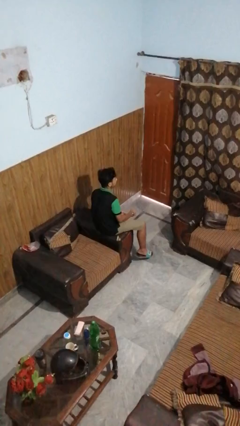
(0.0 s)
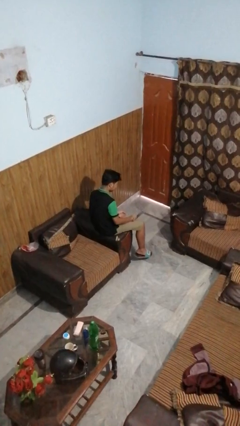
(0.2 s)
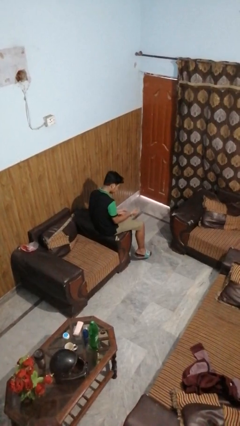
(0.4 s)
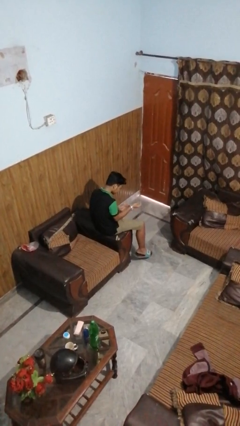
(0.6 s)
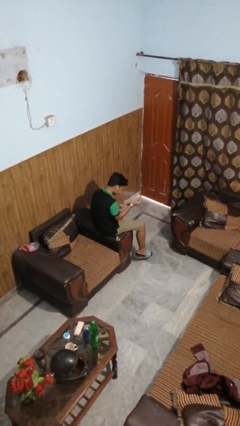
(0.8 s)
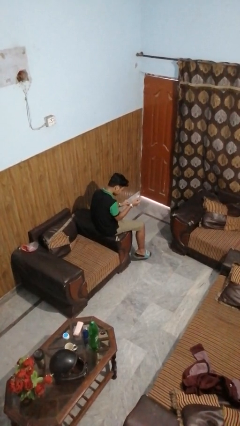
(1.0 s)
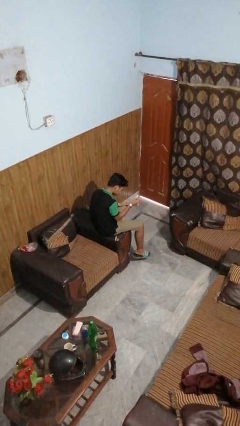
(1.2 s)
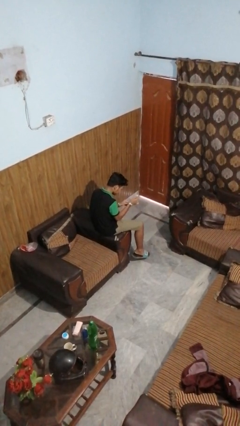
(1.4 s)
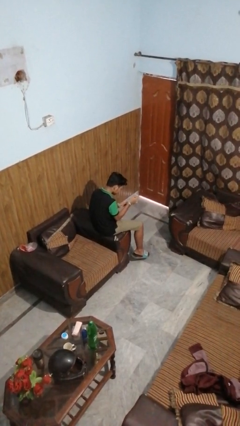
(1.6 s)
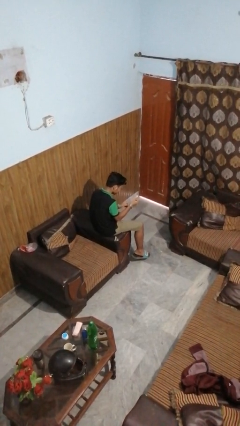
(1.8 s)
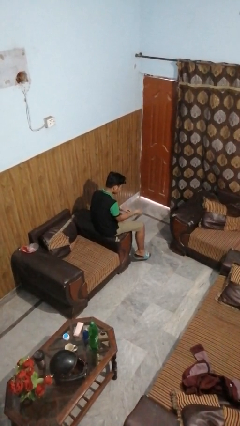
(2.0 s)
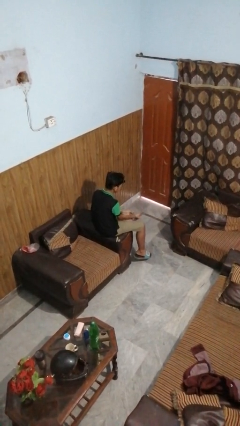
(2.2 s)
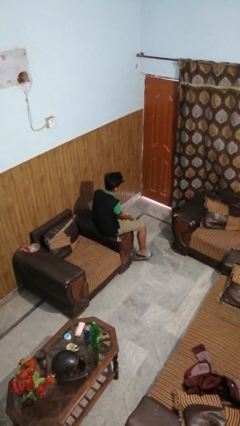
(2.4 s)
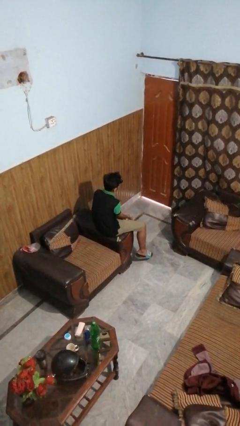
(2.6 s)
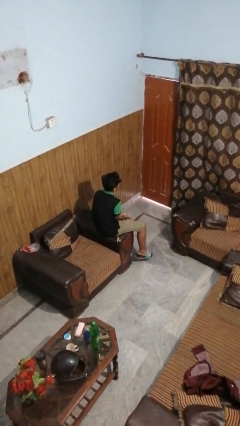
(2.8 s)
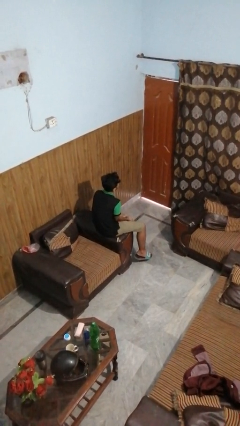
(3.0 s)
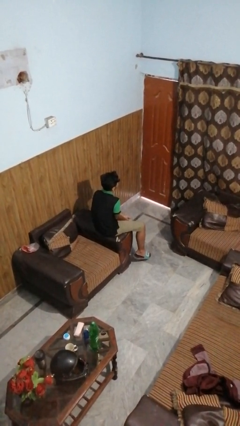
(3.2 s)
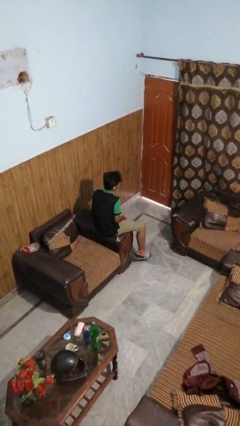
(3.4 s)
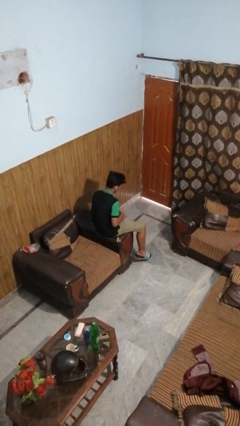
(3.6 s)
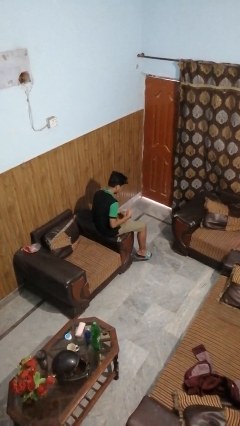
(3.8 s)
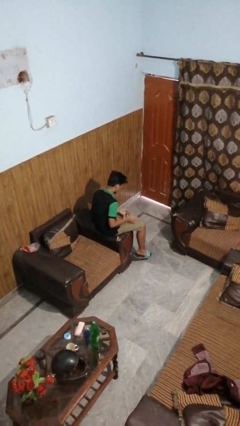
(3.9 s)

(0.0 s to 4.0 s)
person takes off wristwatch

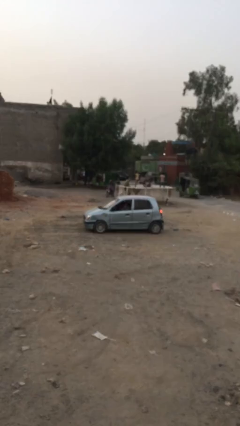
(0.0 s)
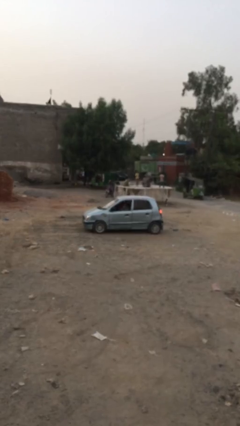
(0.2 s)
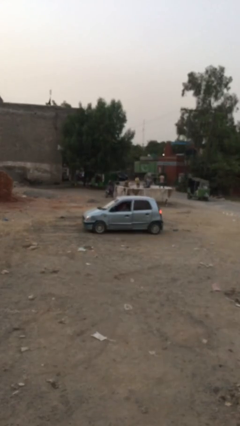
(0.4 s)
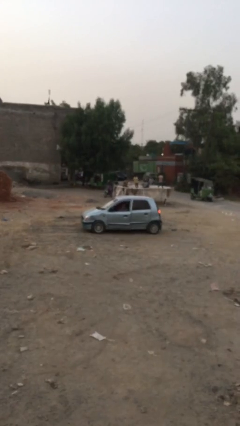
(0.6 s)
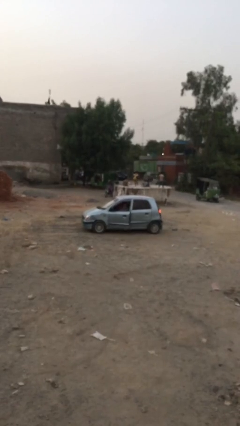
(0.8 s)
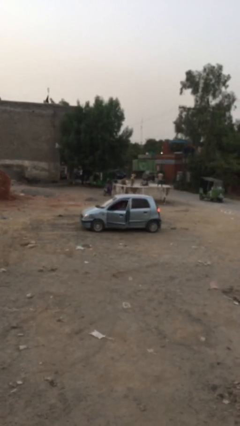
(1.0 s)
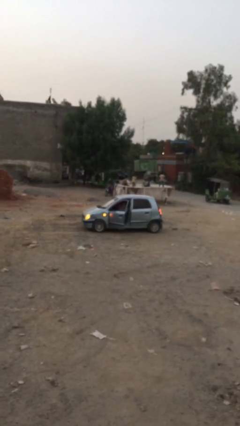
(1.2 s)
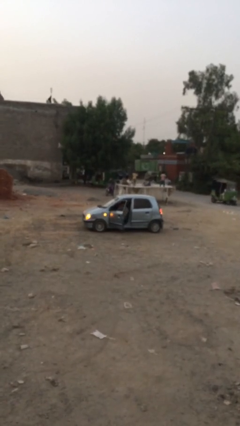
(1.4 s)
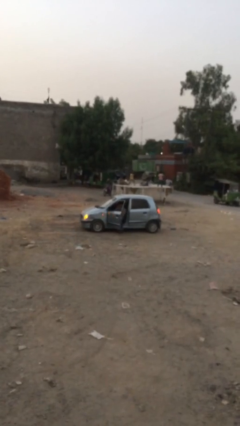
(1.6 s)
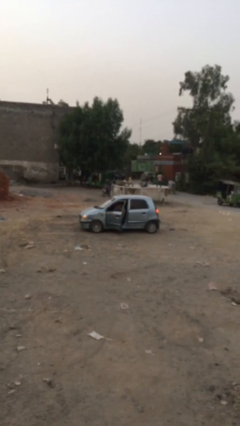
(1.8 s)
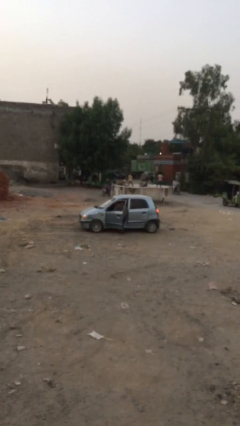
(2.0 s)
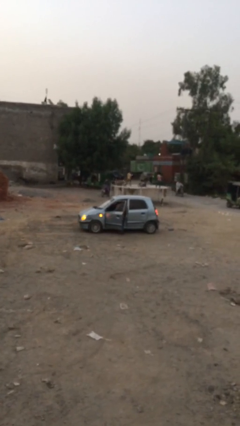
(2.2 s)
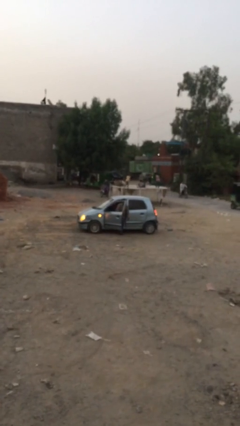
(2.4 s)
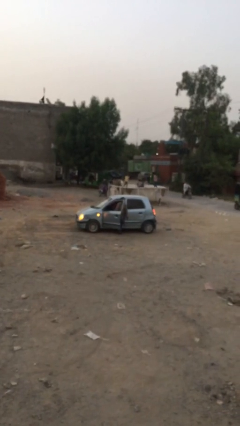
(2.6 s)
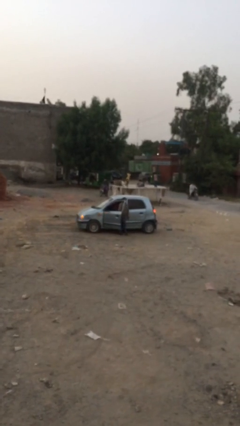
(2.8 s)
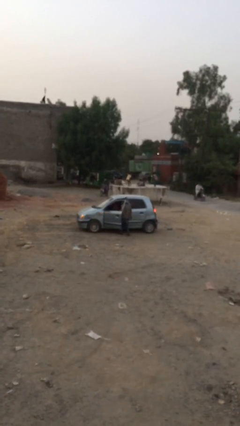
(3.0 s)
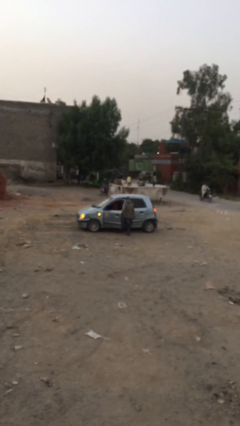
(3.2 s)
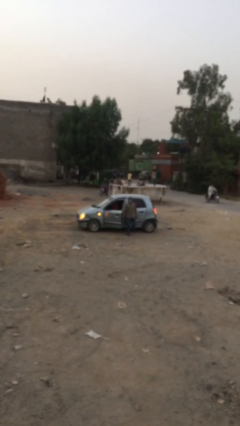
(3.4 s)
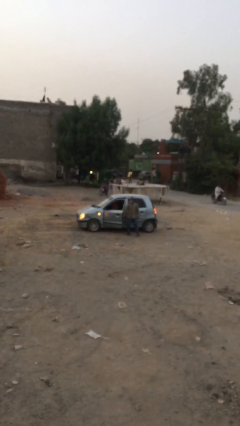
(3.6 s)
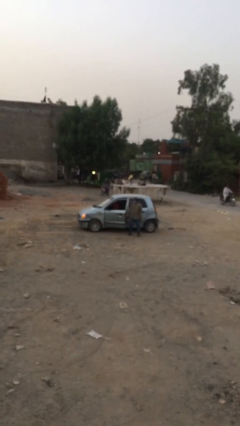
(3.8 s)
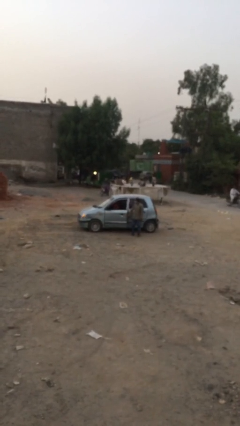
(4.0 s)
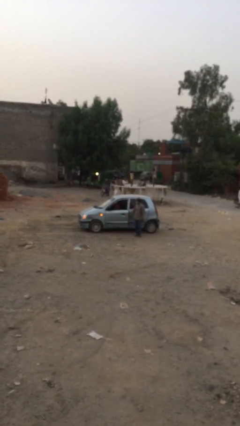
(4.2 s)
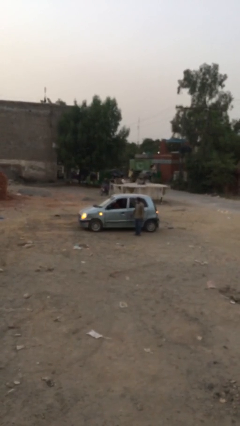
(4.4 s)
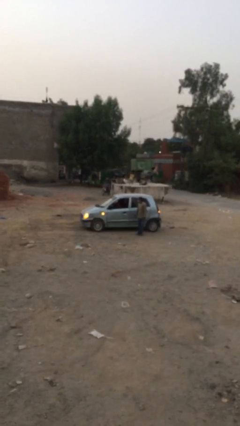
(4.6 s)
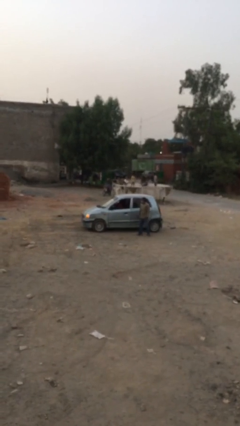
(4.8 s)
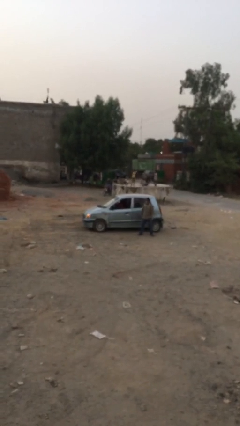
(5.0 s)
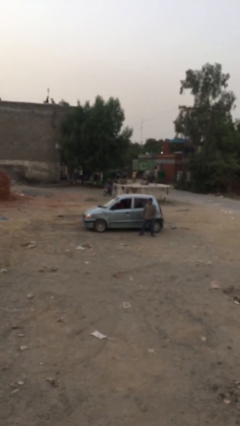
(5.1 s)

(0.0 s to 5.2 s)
car drops off person

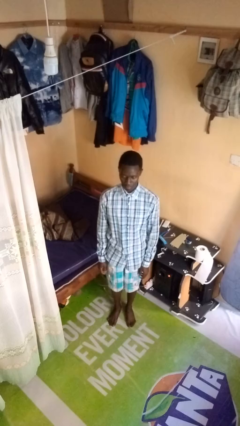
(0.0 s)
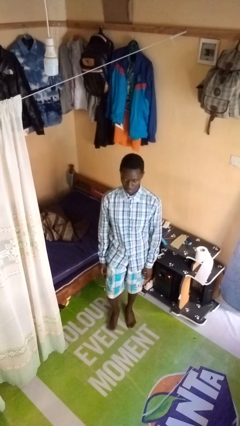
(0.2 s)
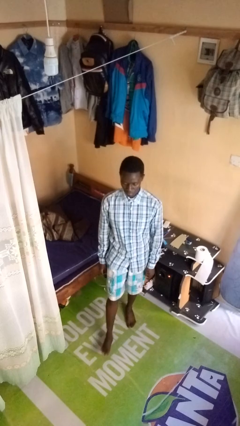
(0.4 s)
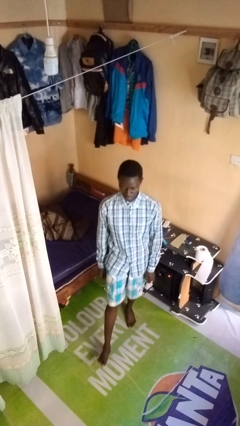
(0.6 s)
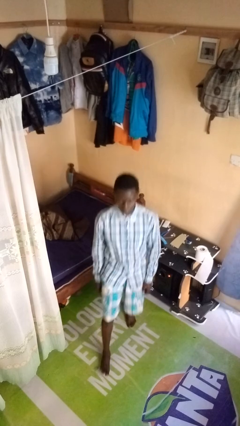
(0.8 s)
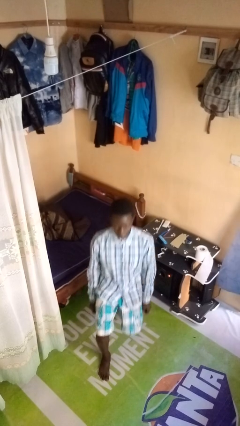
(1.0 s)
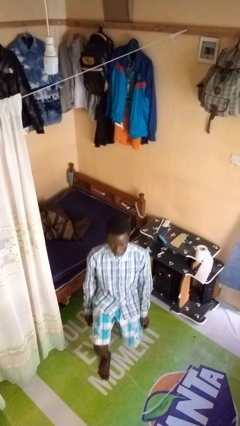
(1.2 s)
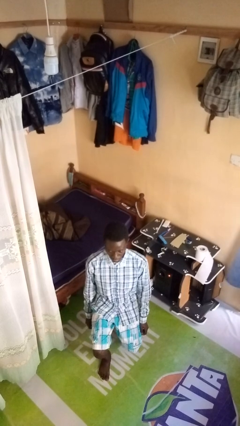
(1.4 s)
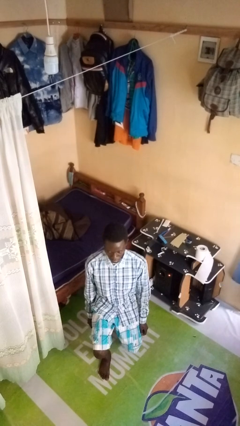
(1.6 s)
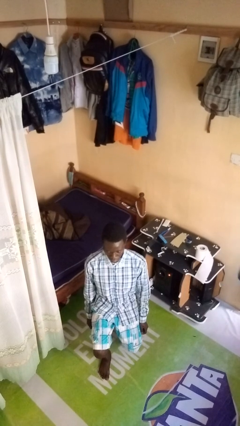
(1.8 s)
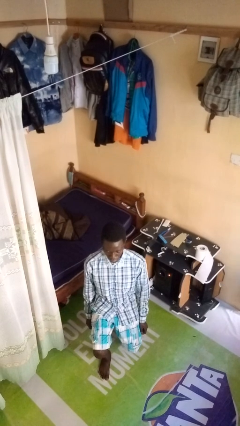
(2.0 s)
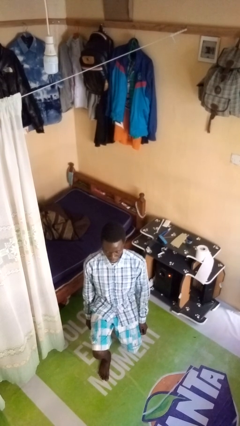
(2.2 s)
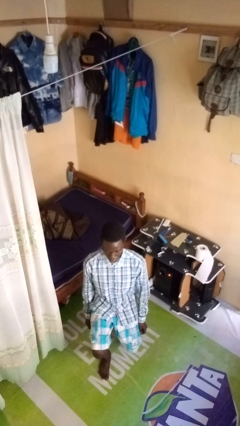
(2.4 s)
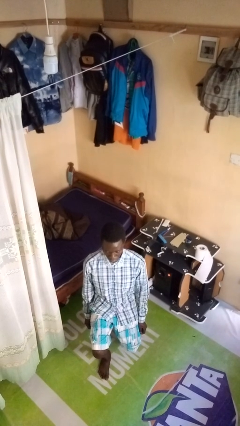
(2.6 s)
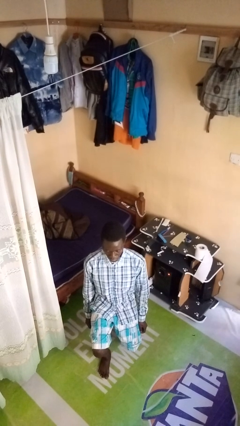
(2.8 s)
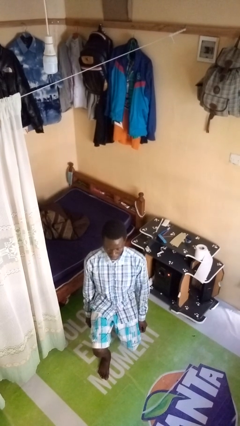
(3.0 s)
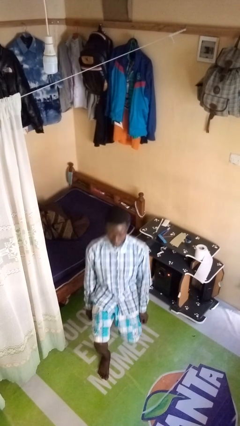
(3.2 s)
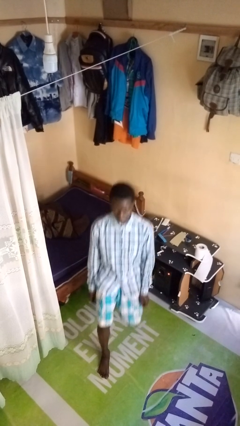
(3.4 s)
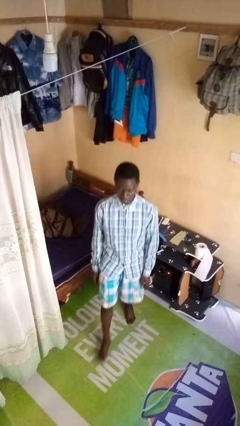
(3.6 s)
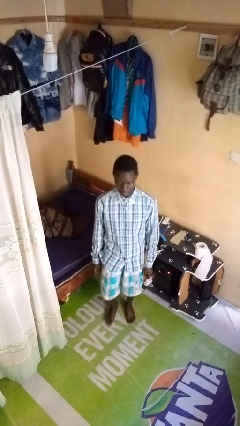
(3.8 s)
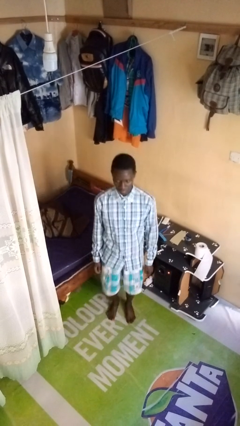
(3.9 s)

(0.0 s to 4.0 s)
person exercises with lunges

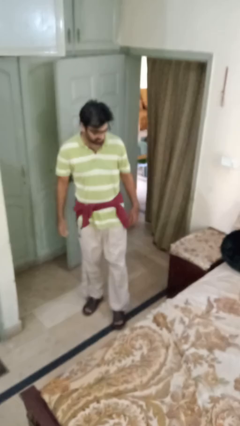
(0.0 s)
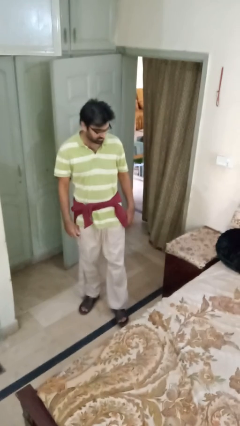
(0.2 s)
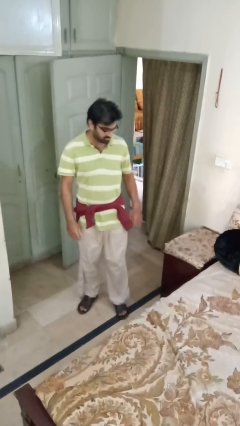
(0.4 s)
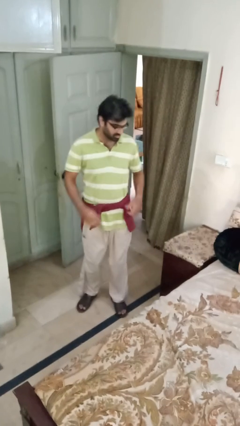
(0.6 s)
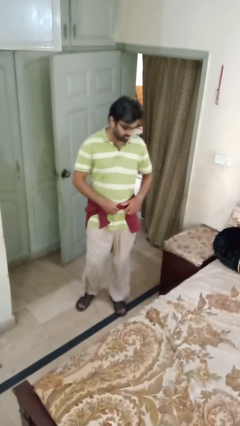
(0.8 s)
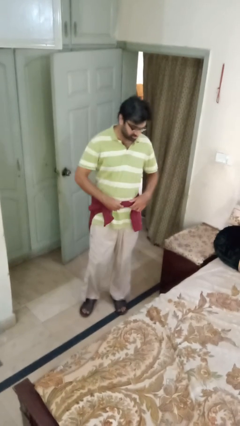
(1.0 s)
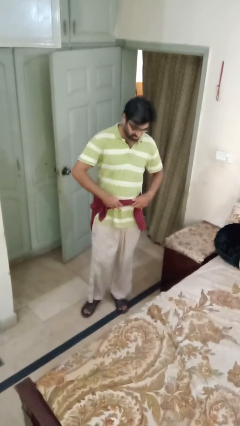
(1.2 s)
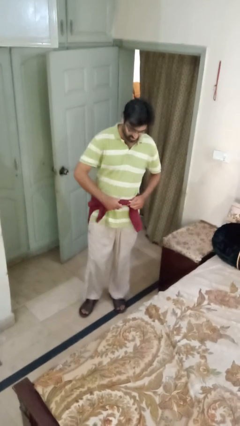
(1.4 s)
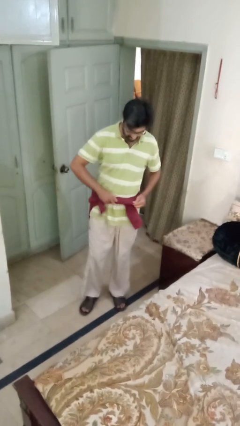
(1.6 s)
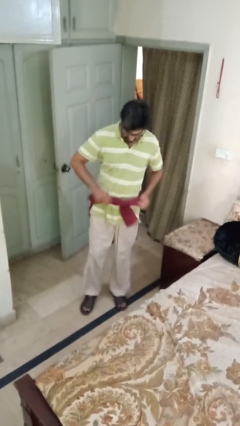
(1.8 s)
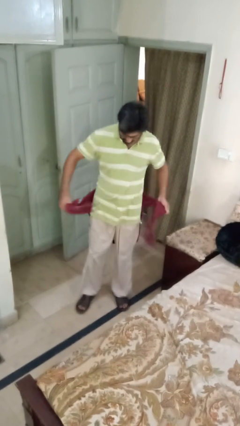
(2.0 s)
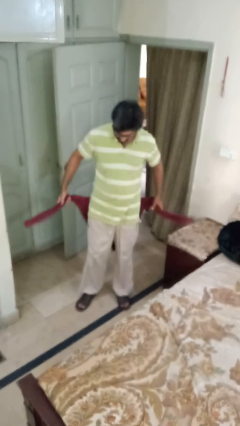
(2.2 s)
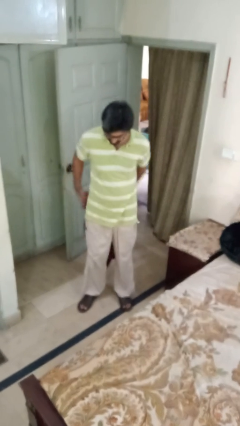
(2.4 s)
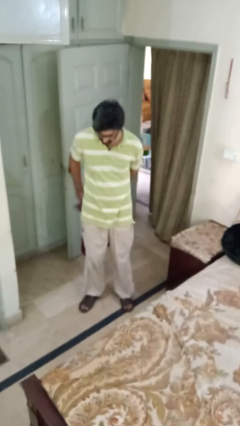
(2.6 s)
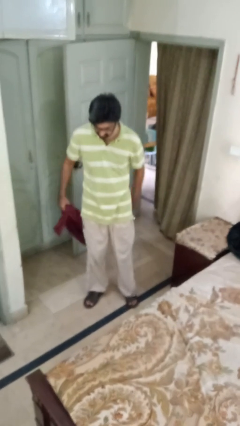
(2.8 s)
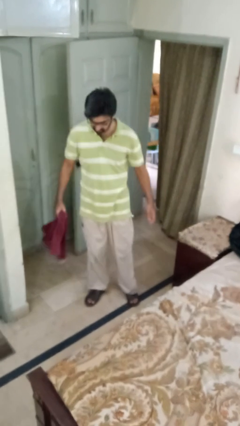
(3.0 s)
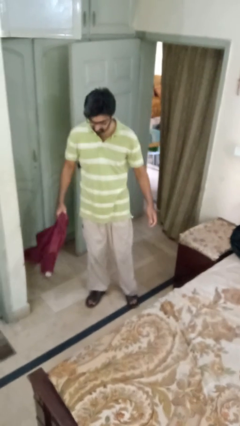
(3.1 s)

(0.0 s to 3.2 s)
person unties jacket around waist

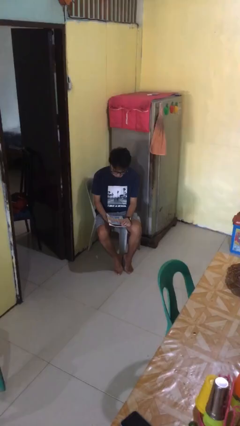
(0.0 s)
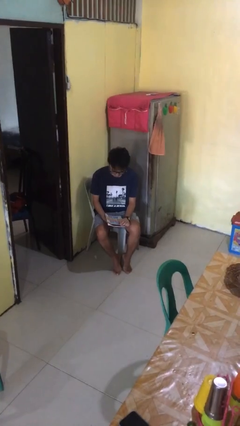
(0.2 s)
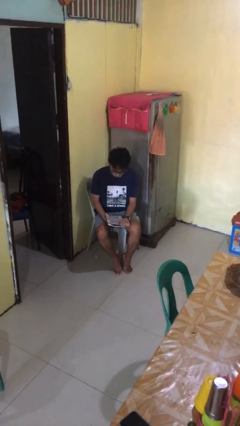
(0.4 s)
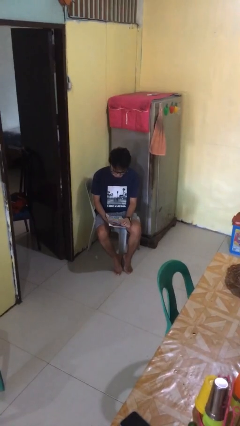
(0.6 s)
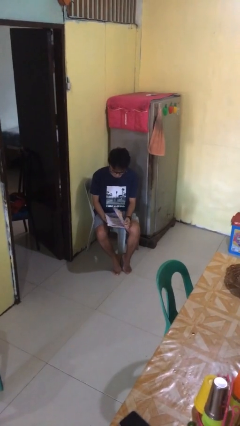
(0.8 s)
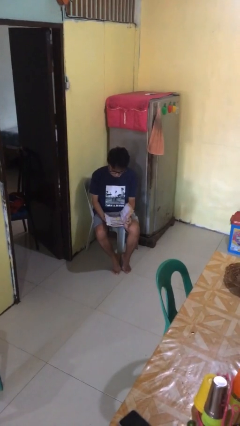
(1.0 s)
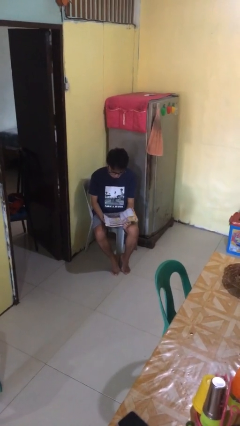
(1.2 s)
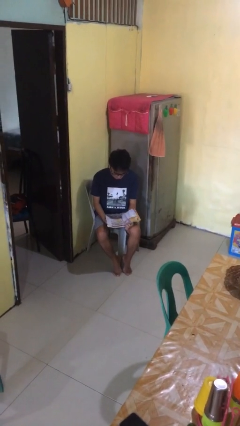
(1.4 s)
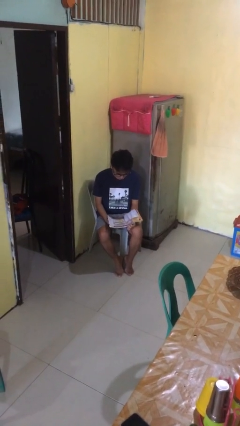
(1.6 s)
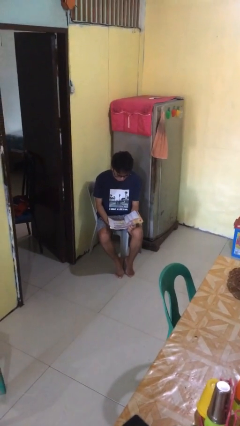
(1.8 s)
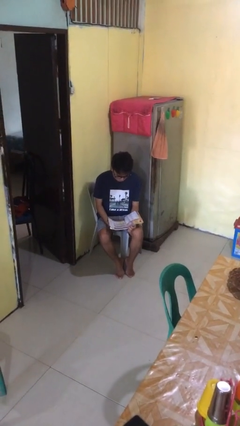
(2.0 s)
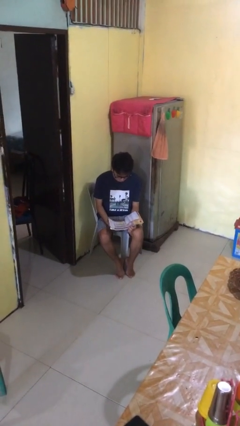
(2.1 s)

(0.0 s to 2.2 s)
person reads magazine
